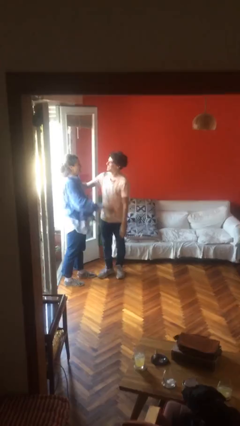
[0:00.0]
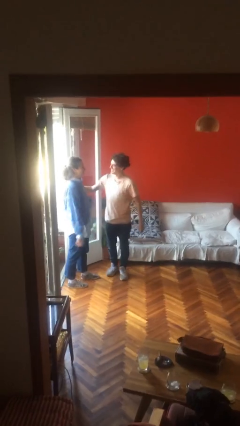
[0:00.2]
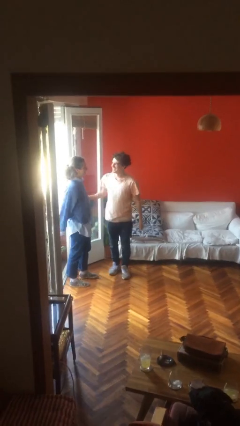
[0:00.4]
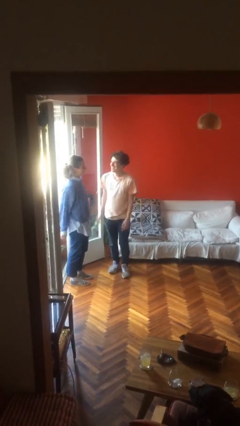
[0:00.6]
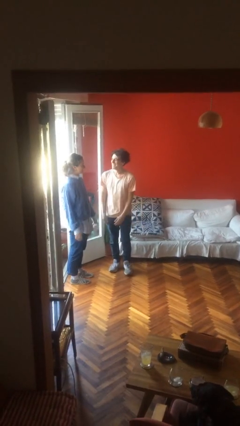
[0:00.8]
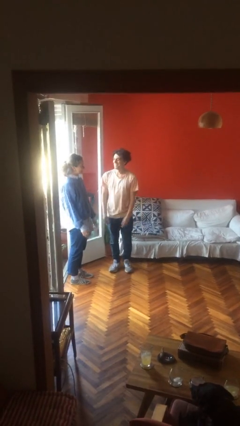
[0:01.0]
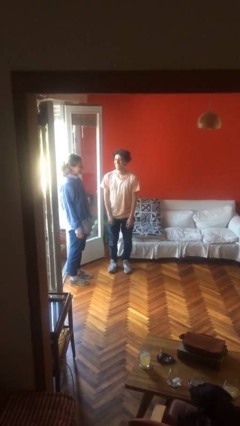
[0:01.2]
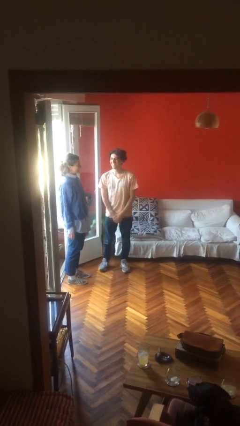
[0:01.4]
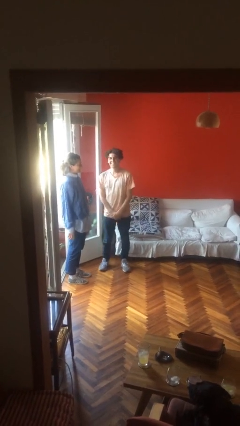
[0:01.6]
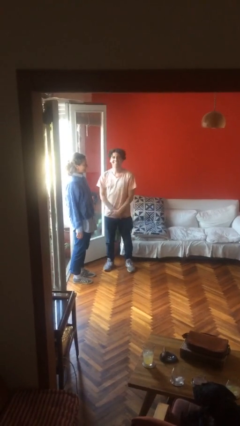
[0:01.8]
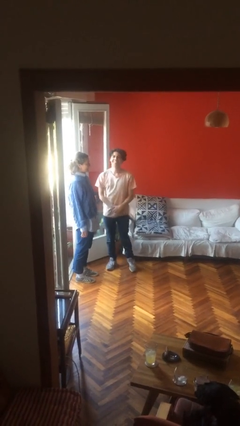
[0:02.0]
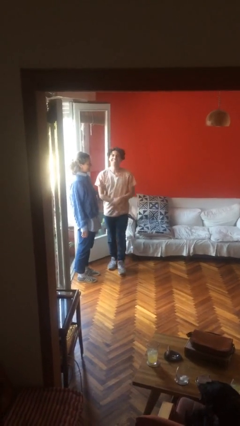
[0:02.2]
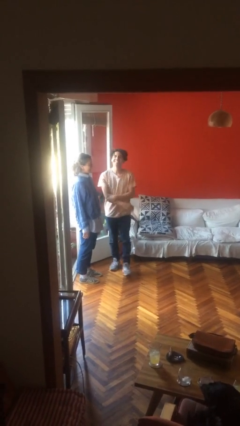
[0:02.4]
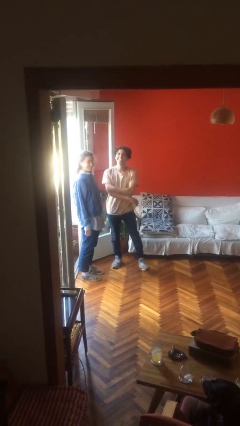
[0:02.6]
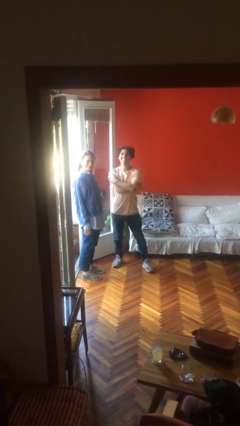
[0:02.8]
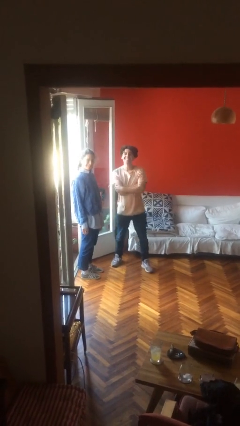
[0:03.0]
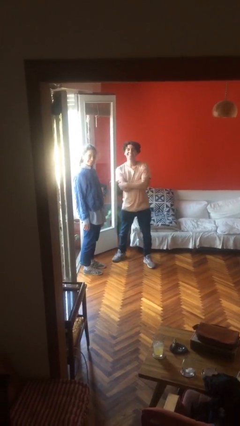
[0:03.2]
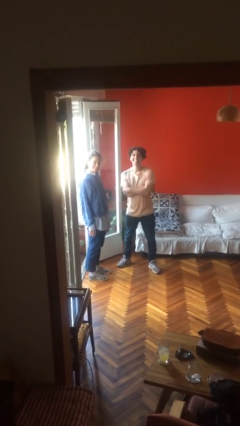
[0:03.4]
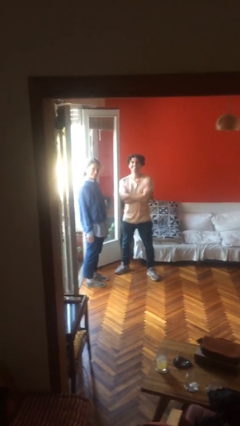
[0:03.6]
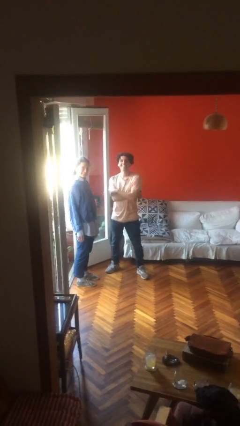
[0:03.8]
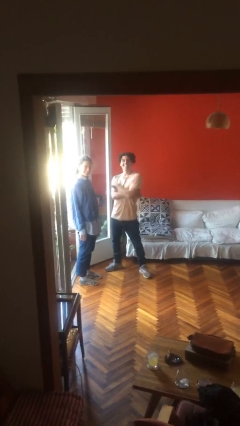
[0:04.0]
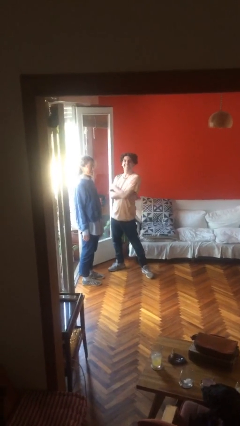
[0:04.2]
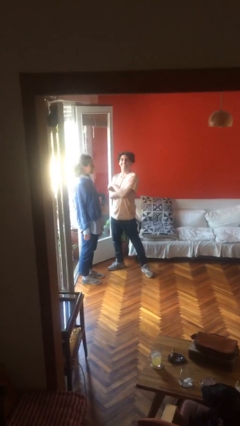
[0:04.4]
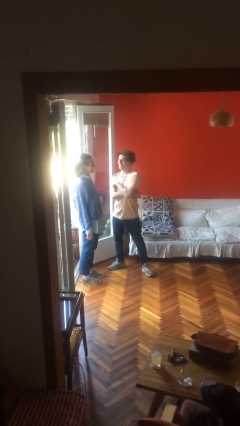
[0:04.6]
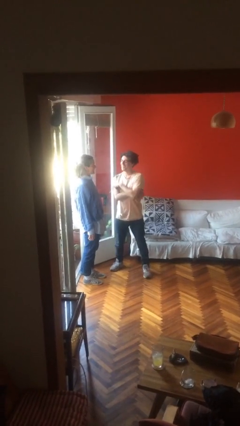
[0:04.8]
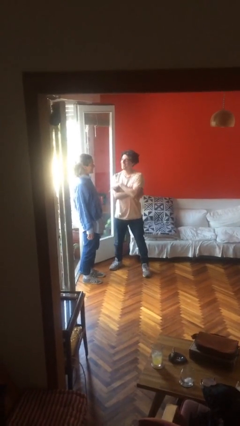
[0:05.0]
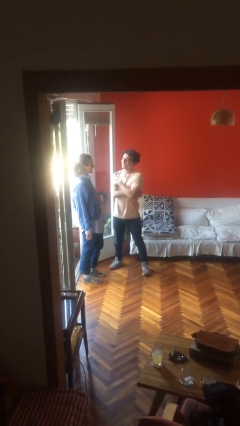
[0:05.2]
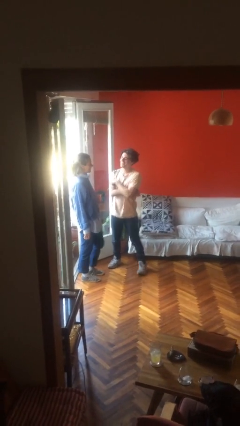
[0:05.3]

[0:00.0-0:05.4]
person talks to person

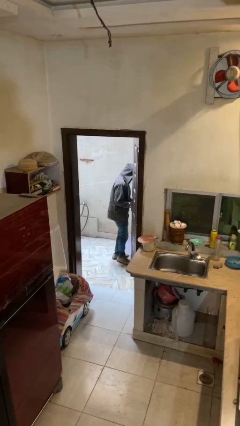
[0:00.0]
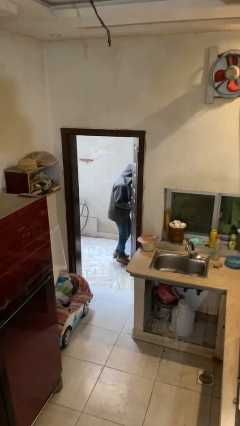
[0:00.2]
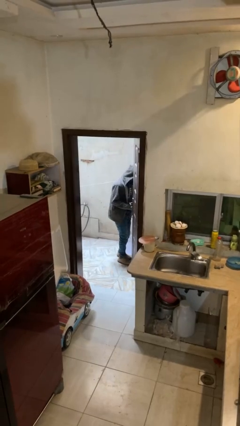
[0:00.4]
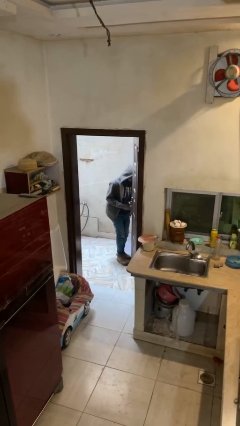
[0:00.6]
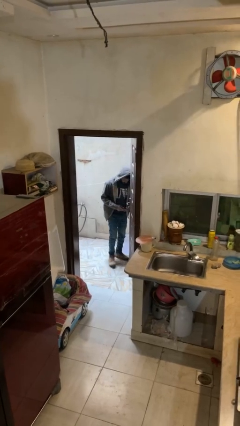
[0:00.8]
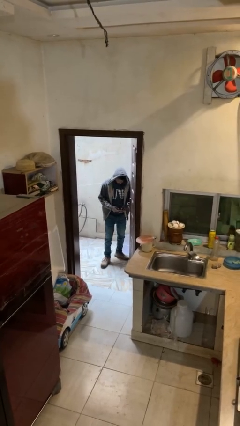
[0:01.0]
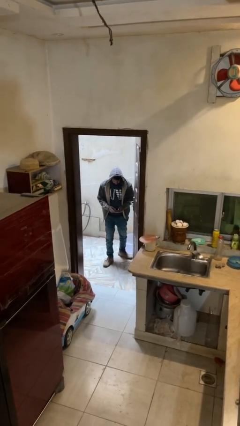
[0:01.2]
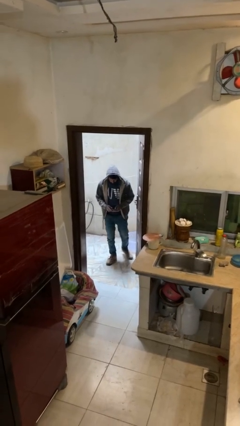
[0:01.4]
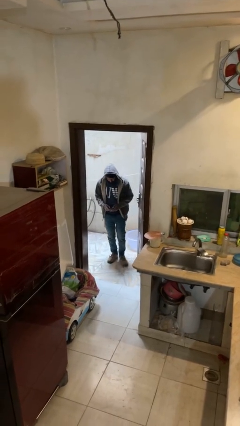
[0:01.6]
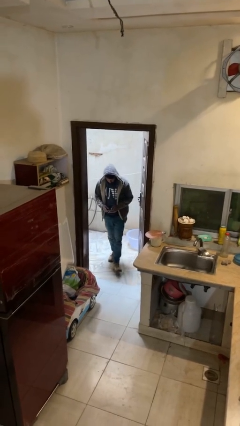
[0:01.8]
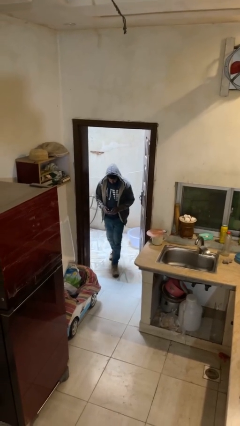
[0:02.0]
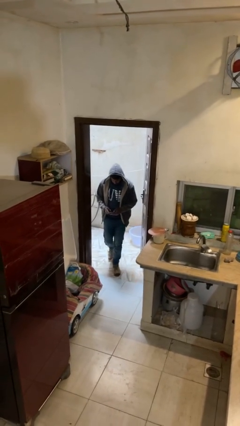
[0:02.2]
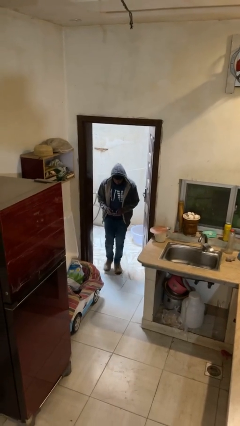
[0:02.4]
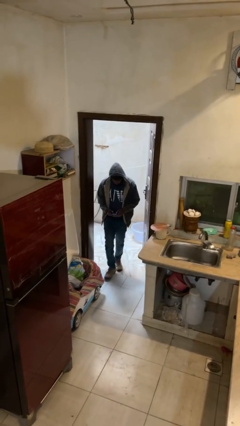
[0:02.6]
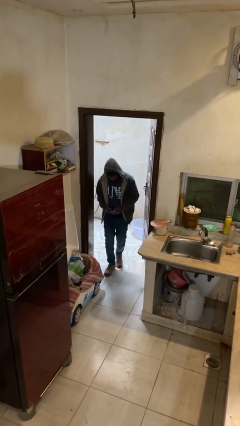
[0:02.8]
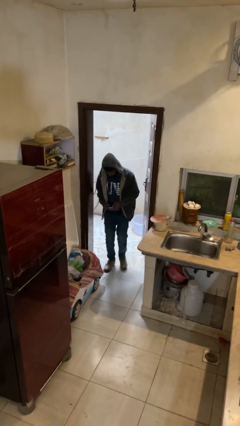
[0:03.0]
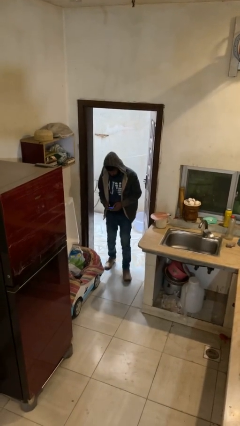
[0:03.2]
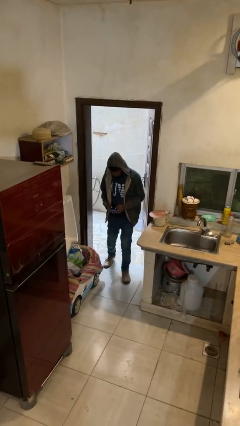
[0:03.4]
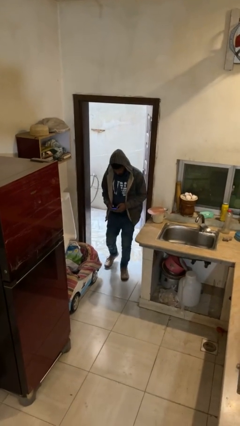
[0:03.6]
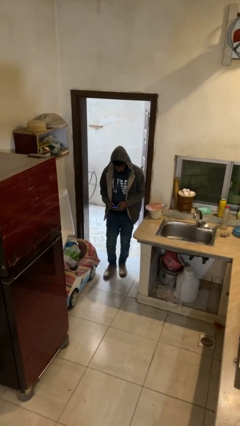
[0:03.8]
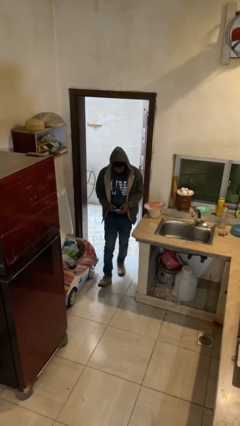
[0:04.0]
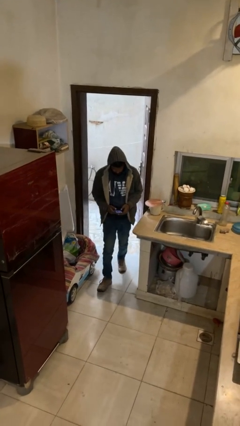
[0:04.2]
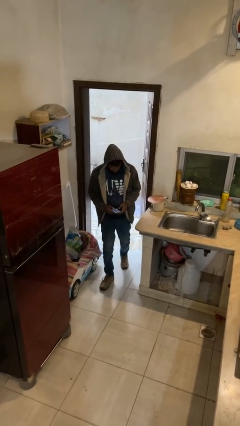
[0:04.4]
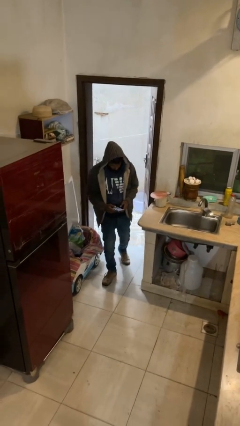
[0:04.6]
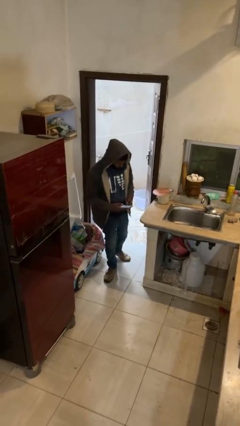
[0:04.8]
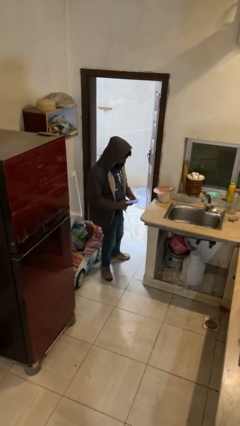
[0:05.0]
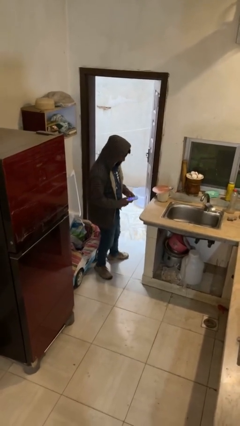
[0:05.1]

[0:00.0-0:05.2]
person enters scene through structure

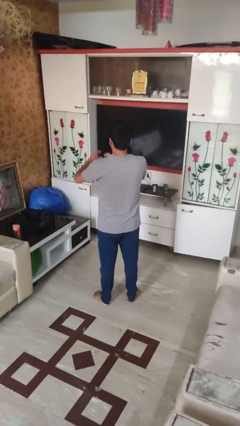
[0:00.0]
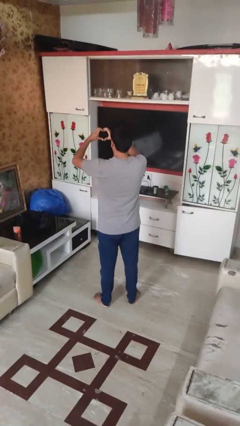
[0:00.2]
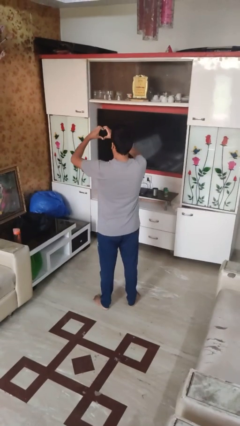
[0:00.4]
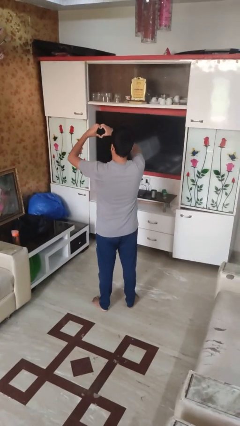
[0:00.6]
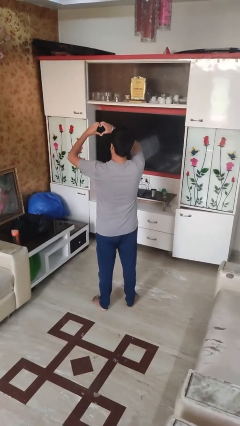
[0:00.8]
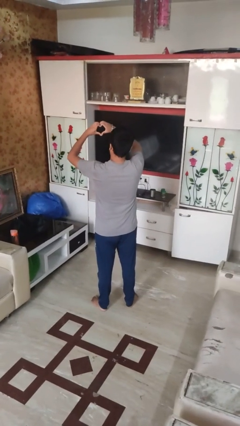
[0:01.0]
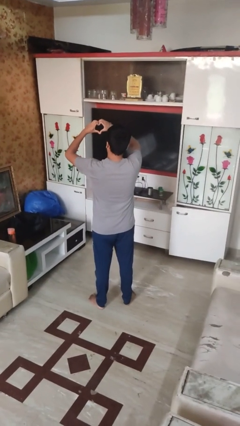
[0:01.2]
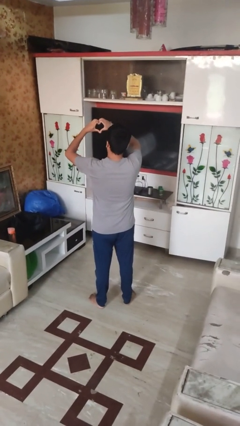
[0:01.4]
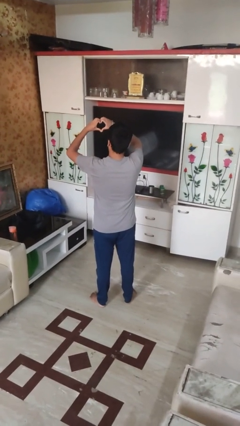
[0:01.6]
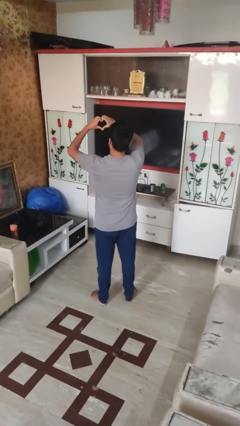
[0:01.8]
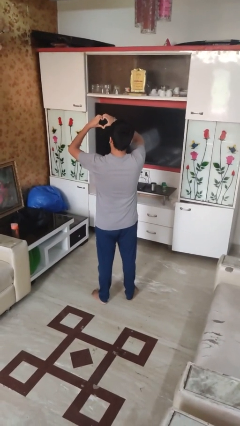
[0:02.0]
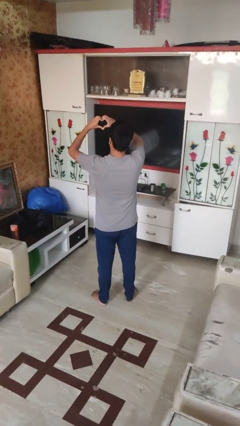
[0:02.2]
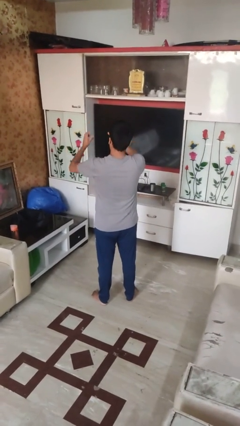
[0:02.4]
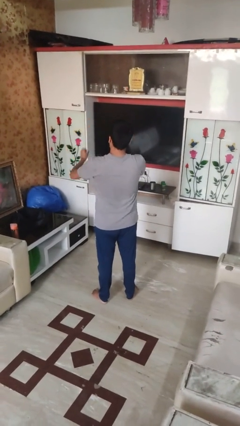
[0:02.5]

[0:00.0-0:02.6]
person gestures heart

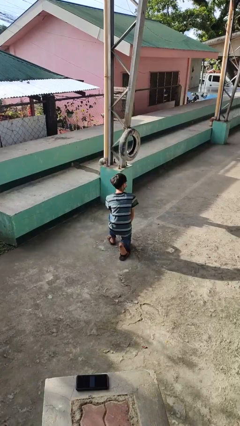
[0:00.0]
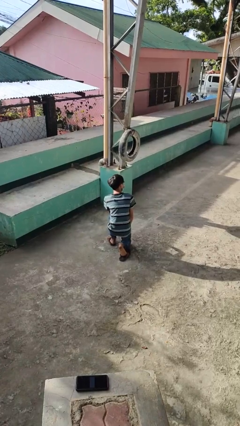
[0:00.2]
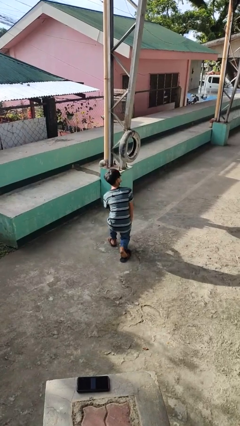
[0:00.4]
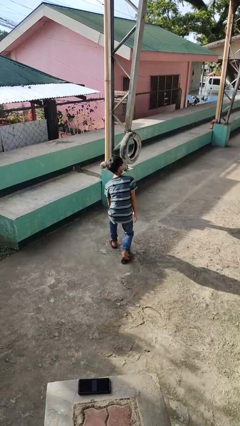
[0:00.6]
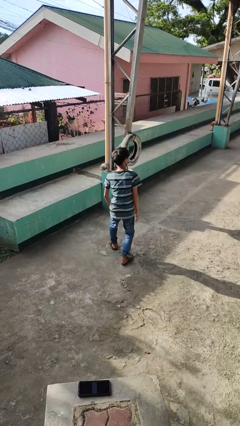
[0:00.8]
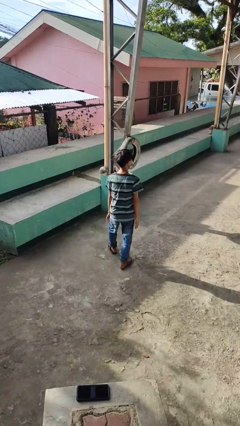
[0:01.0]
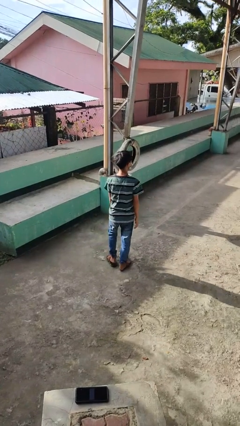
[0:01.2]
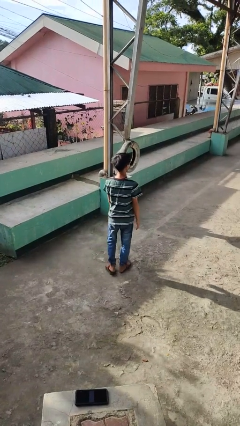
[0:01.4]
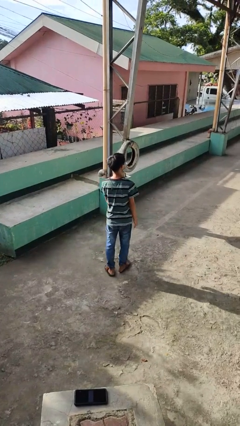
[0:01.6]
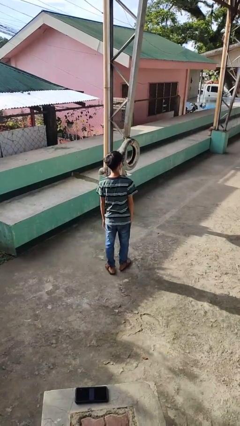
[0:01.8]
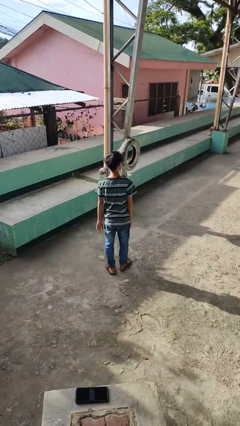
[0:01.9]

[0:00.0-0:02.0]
person stands up from floor

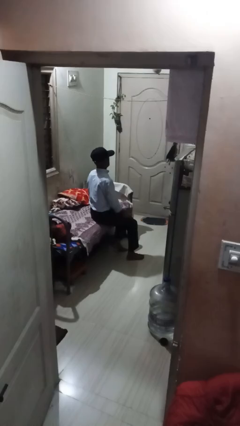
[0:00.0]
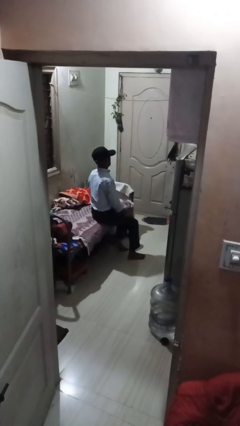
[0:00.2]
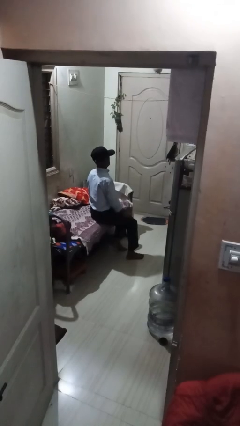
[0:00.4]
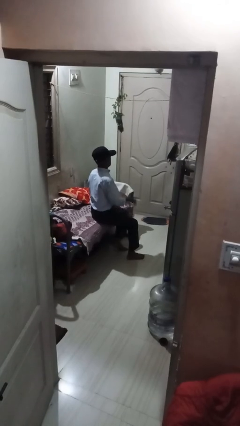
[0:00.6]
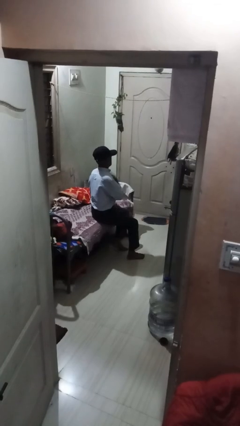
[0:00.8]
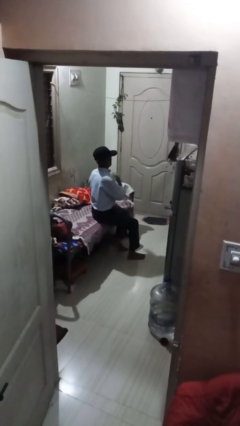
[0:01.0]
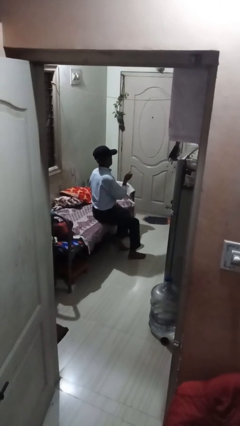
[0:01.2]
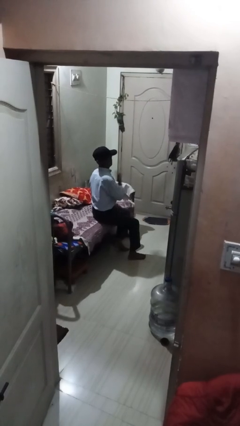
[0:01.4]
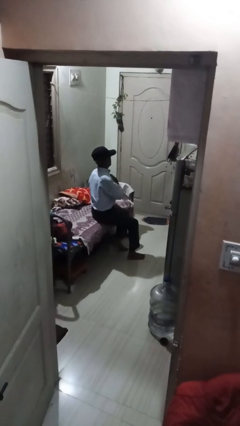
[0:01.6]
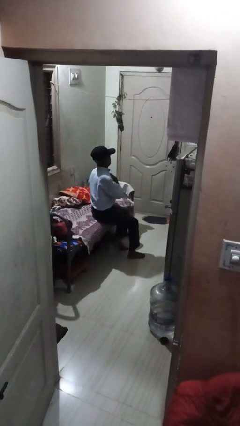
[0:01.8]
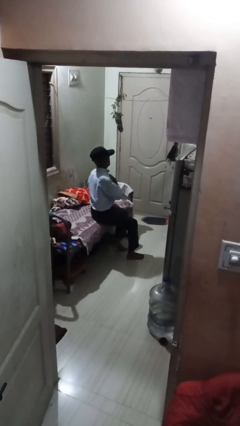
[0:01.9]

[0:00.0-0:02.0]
person drums on chest
